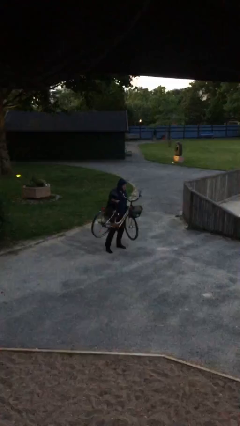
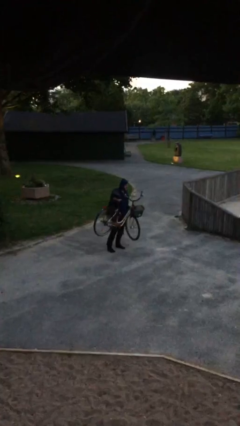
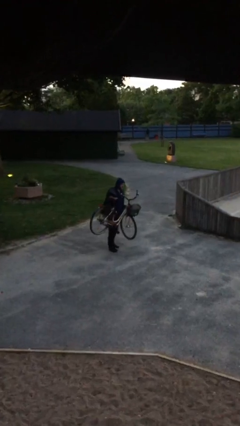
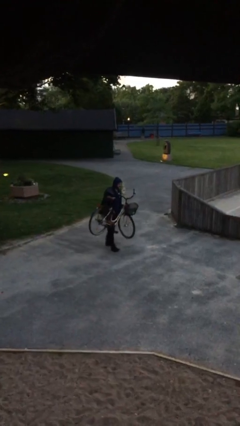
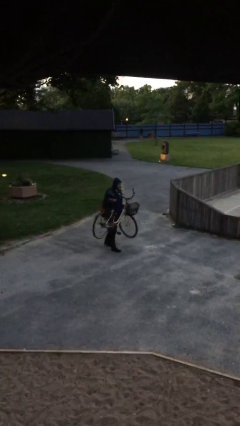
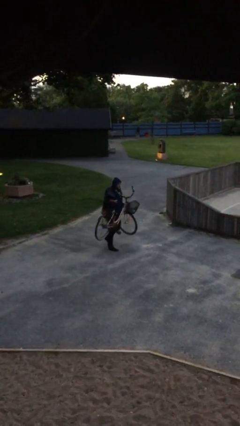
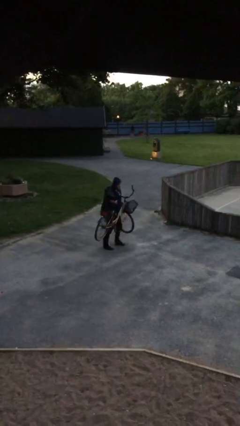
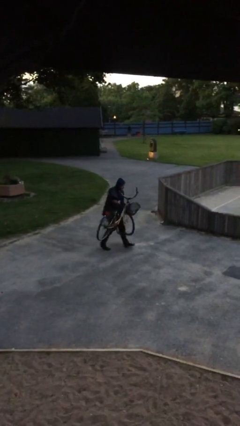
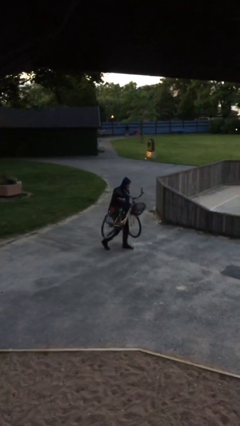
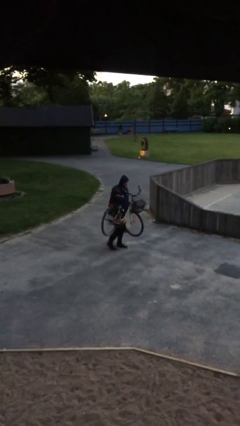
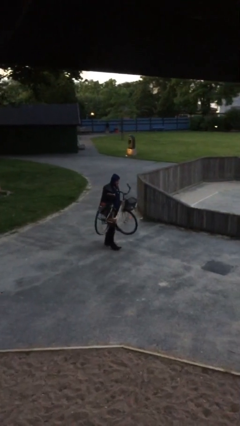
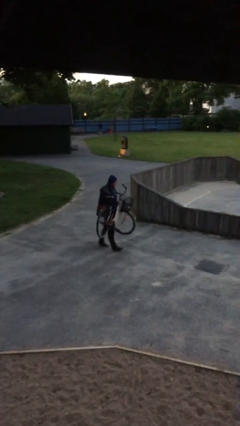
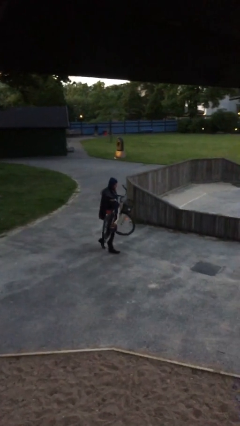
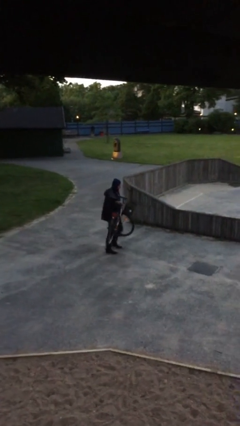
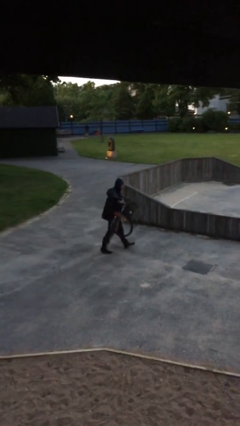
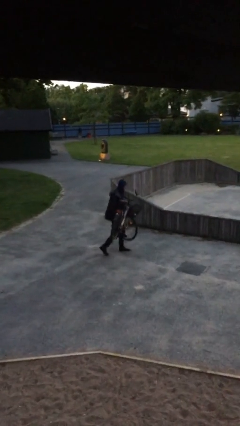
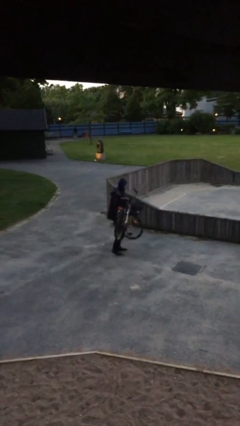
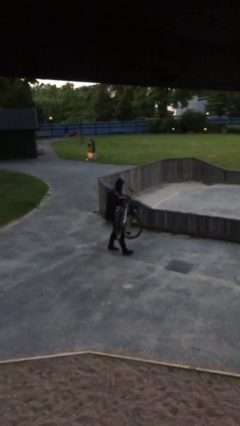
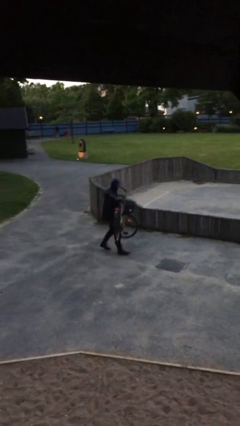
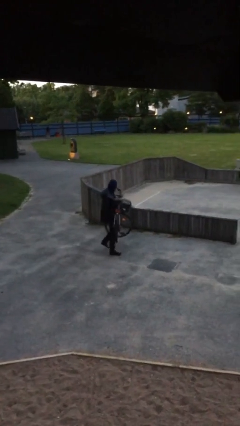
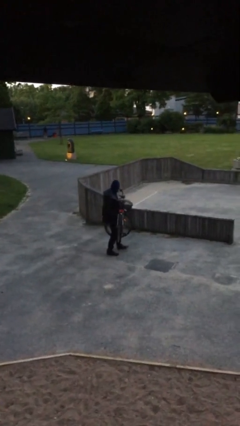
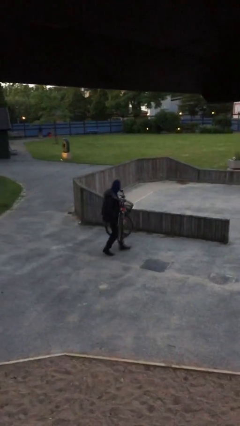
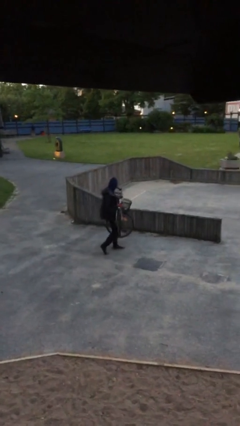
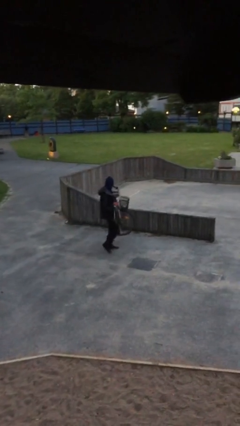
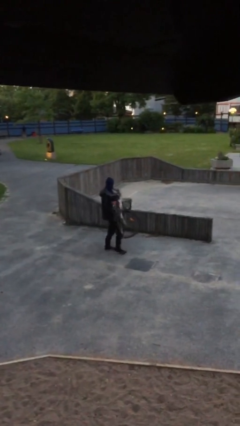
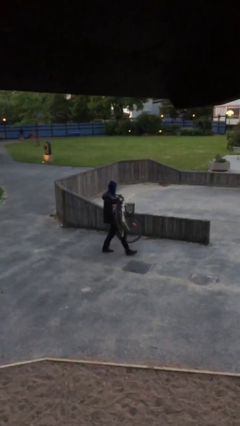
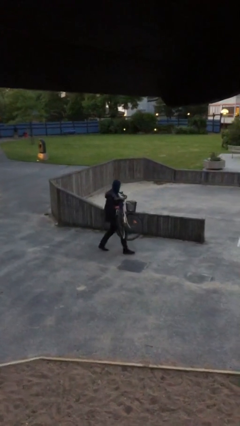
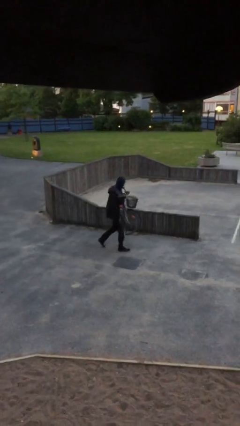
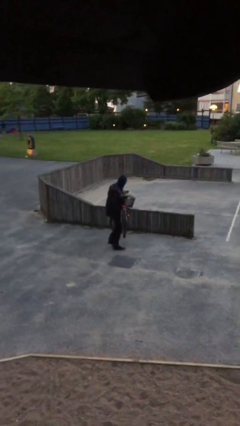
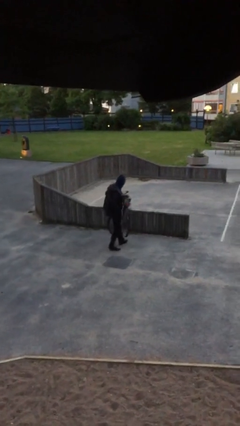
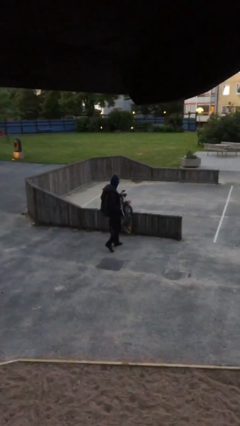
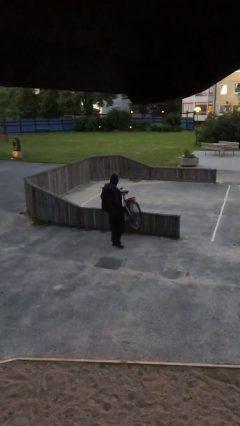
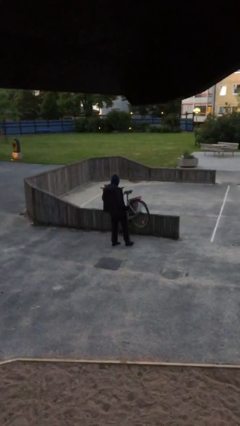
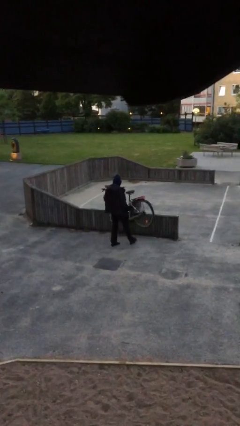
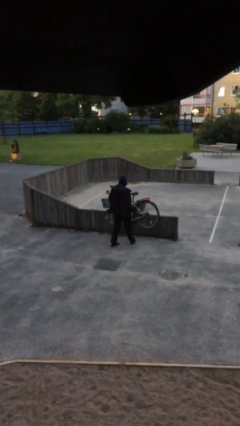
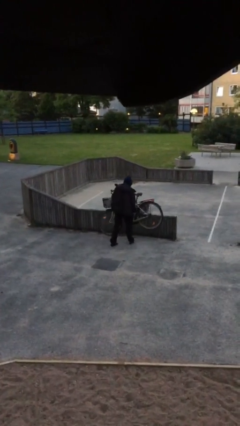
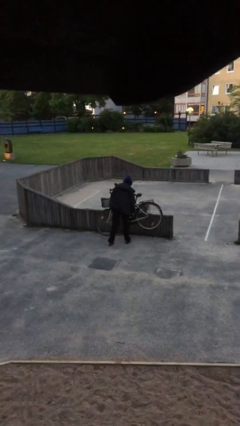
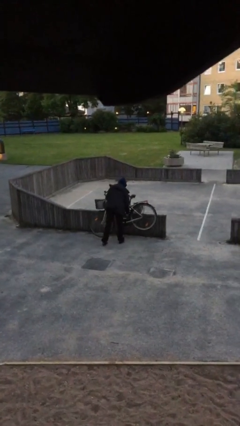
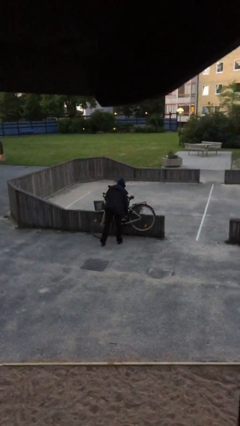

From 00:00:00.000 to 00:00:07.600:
person carries heavy object

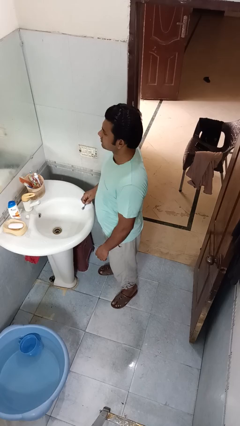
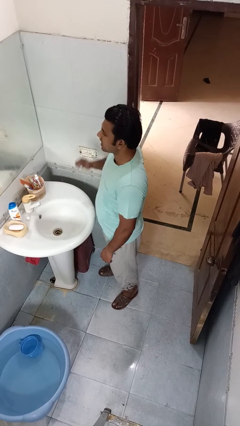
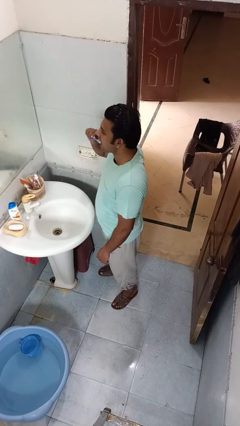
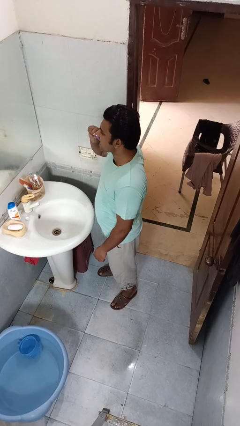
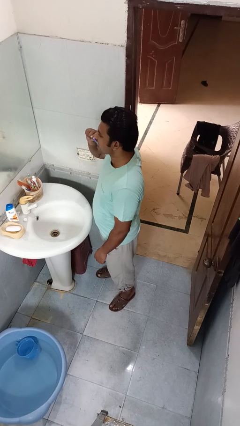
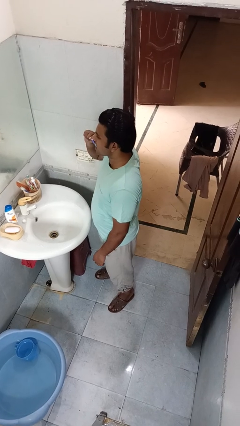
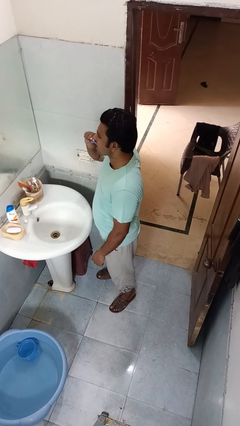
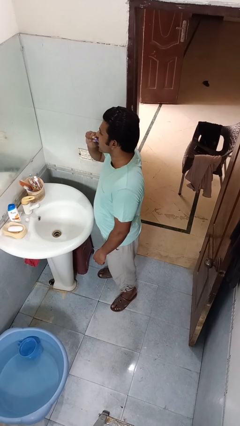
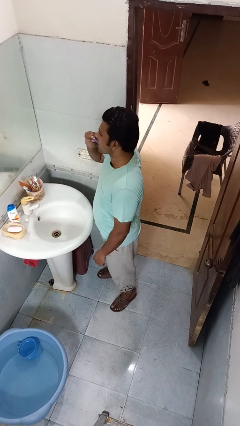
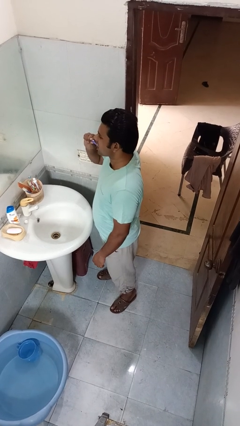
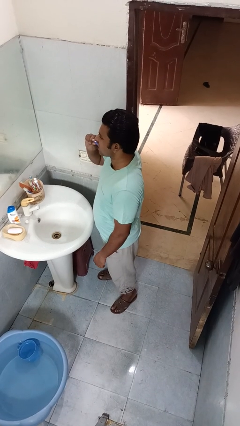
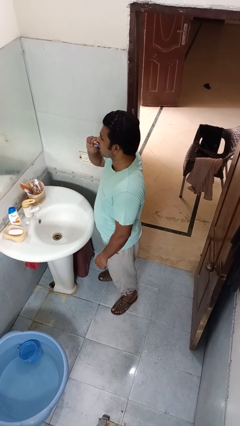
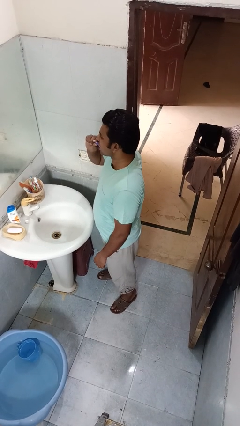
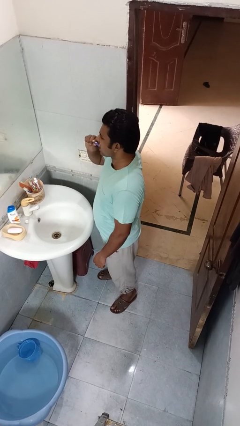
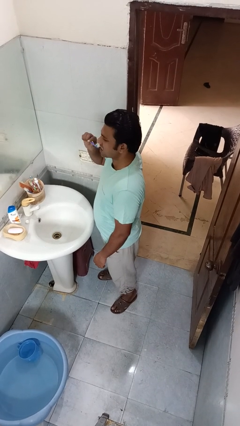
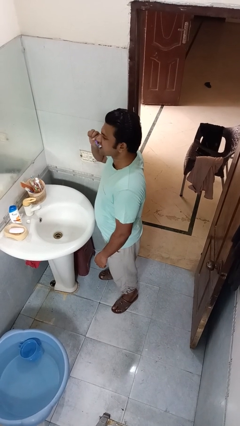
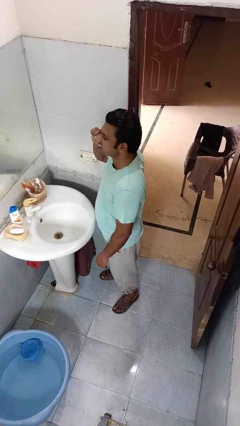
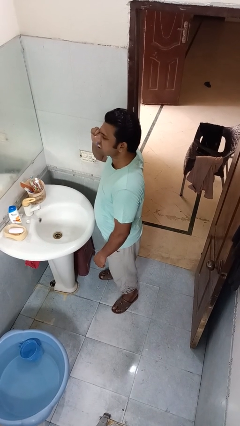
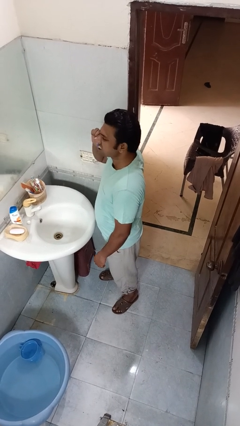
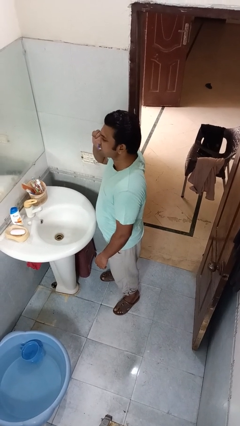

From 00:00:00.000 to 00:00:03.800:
person brushes teeth

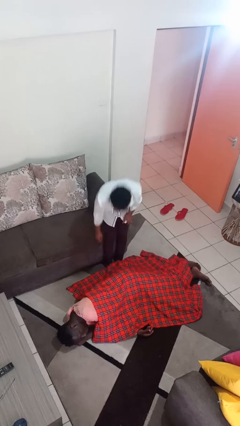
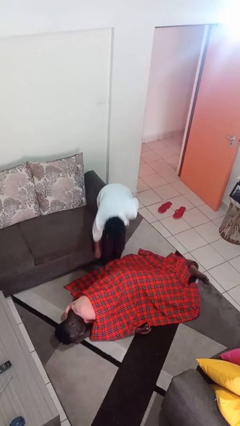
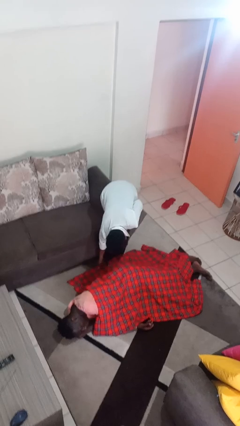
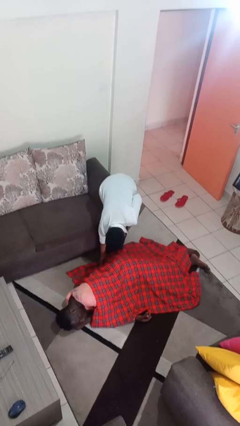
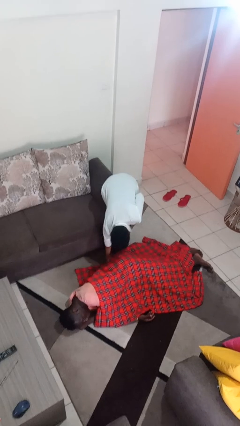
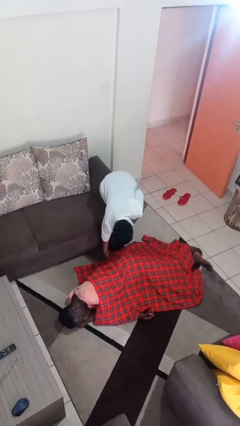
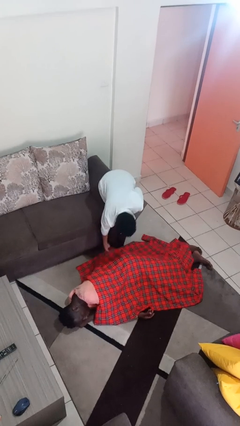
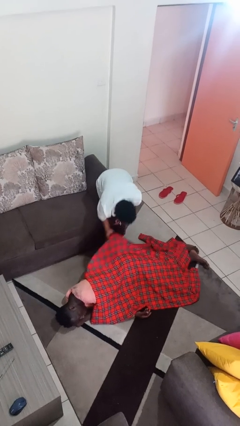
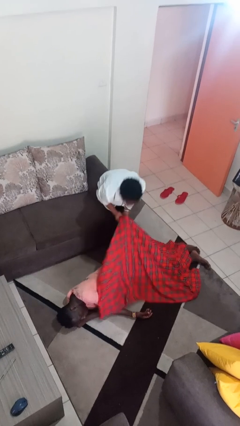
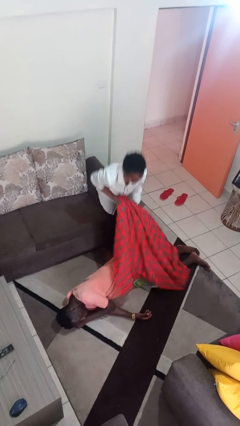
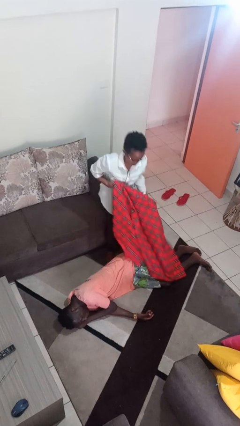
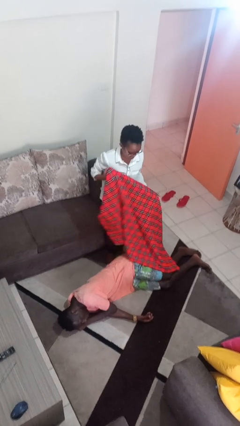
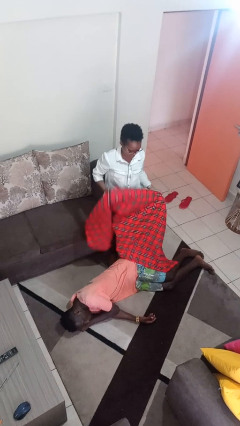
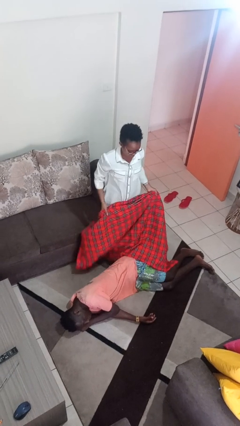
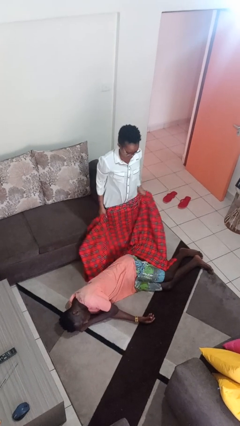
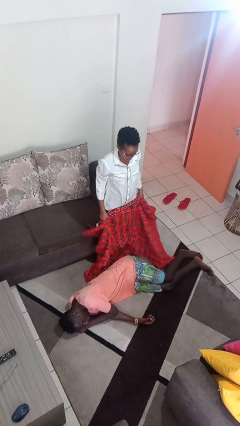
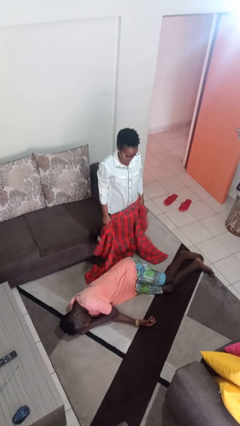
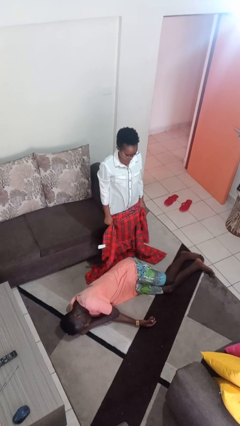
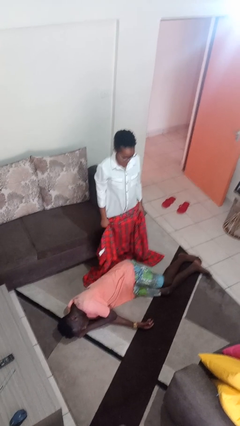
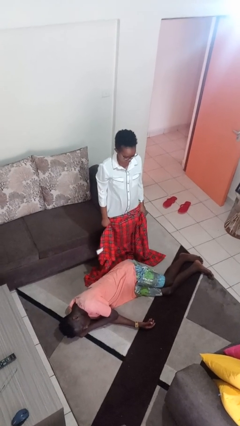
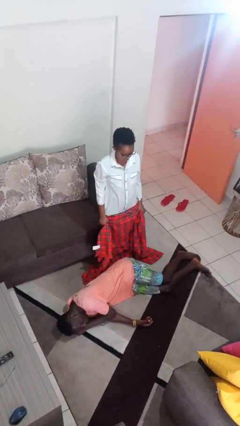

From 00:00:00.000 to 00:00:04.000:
person uncovers friend with blanket

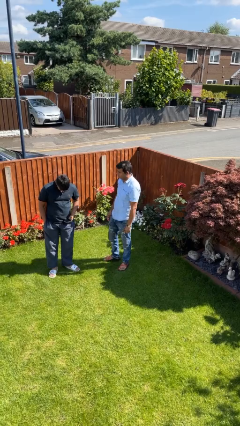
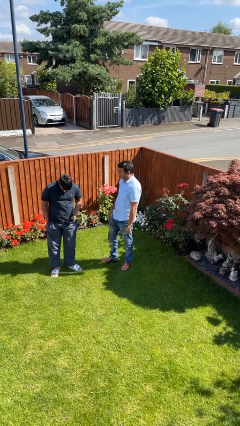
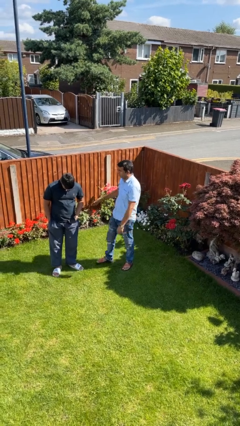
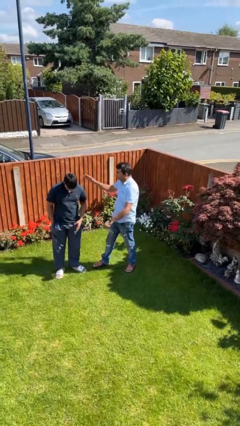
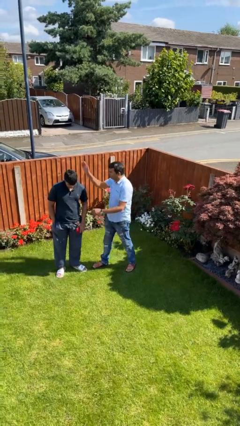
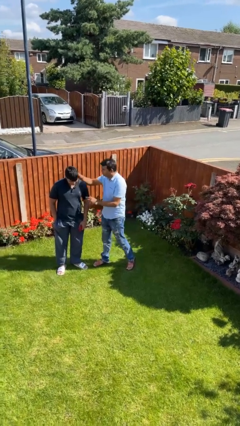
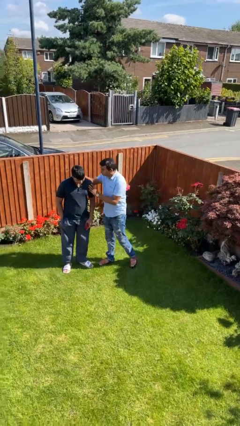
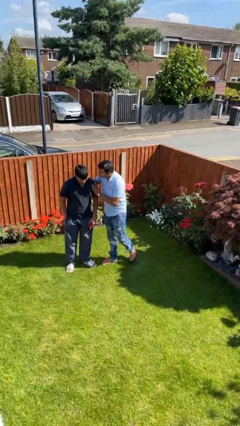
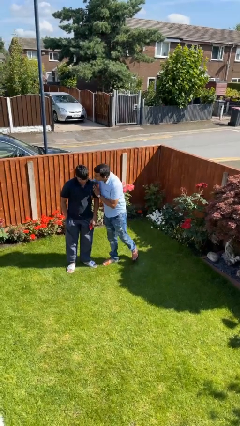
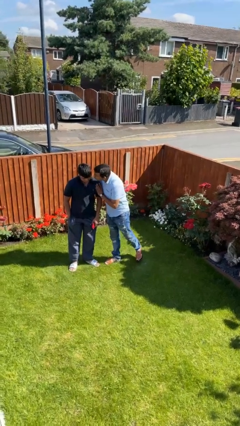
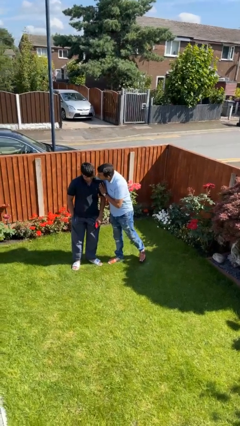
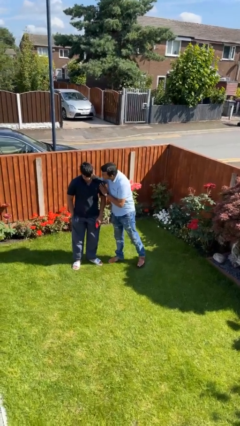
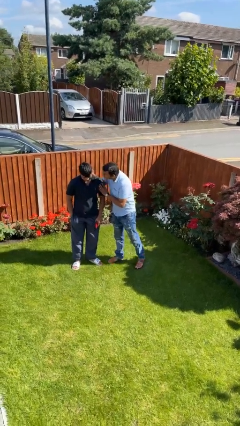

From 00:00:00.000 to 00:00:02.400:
person kisses cheek of person

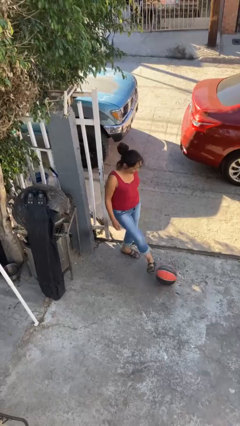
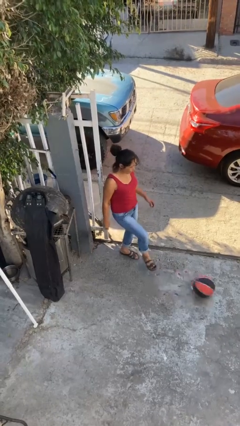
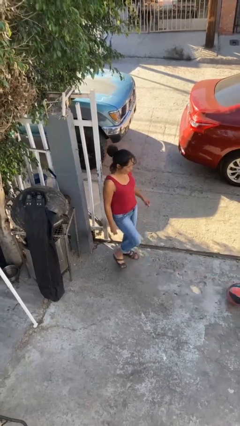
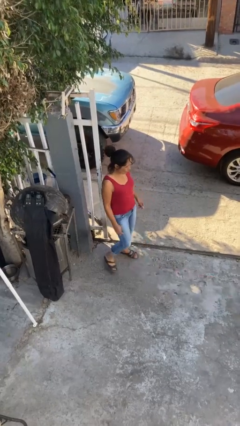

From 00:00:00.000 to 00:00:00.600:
person kicks object to person
